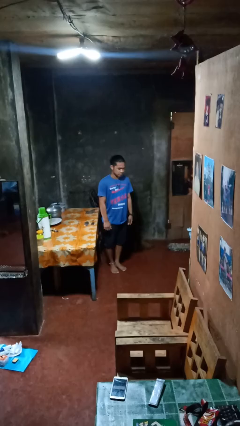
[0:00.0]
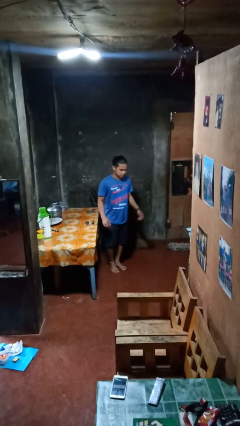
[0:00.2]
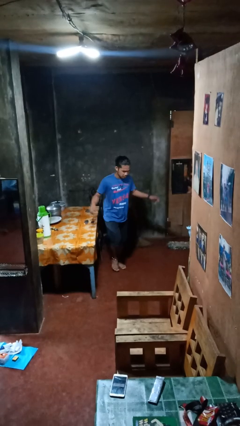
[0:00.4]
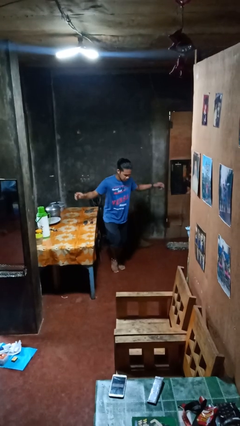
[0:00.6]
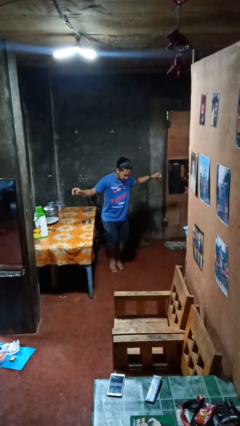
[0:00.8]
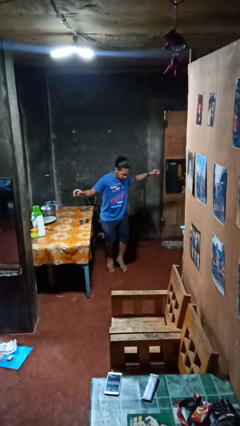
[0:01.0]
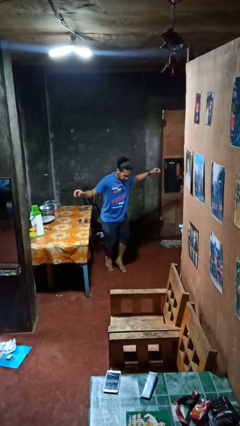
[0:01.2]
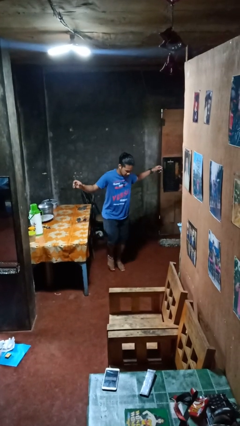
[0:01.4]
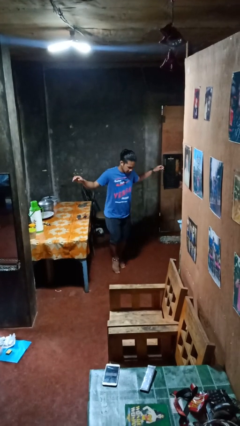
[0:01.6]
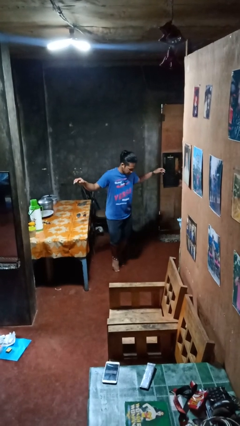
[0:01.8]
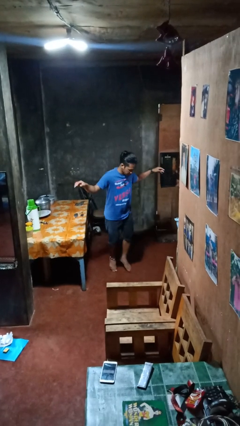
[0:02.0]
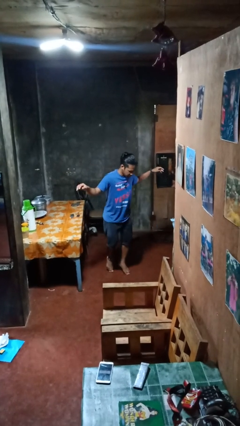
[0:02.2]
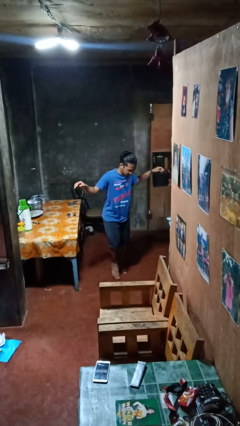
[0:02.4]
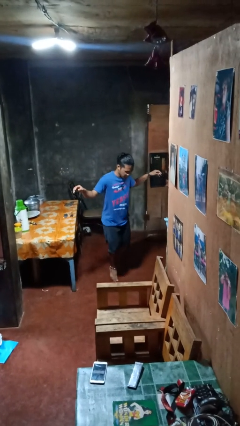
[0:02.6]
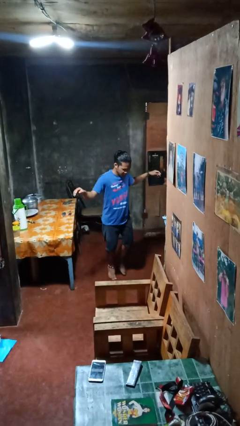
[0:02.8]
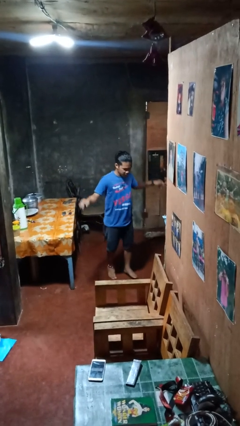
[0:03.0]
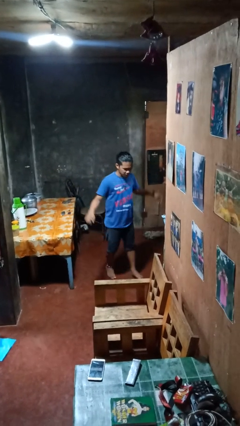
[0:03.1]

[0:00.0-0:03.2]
person walks tiptoe

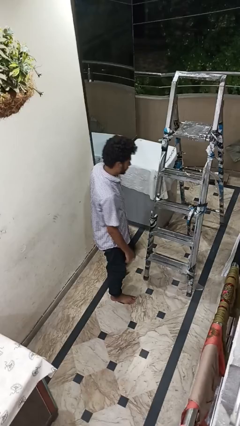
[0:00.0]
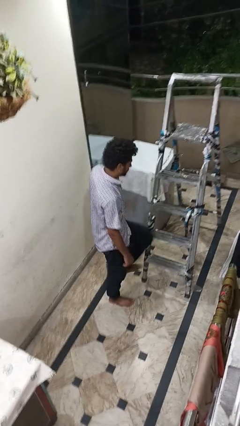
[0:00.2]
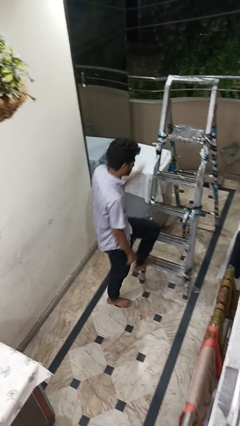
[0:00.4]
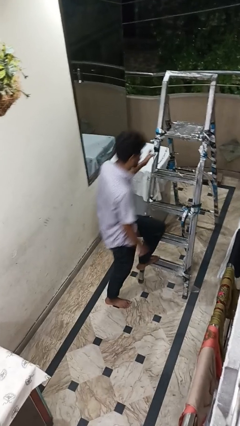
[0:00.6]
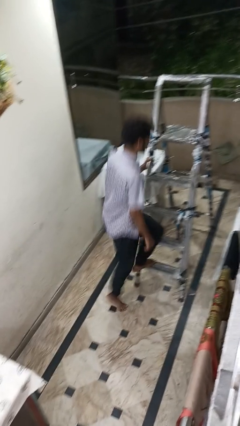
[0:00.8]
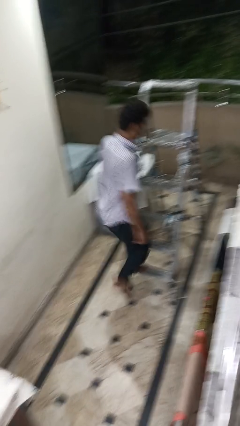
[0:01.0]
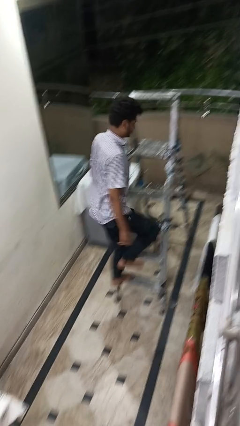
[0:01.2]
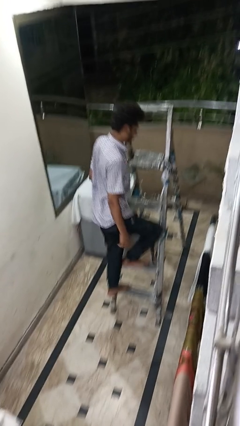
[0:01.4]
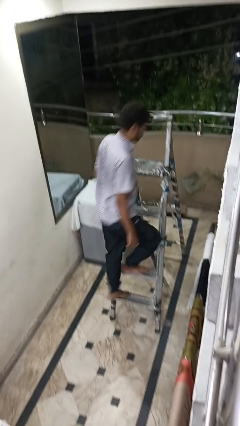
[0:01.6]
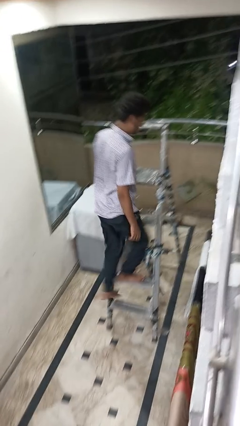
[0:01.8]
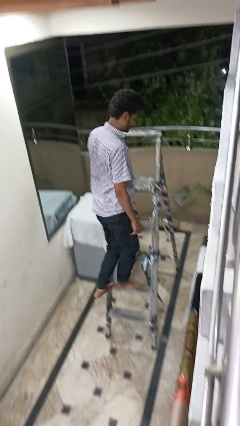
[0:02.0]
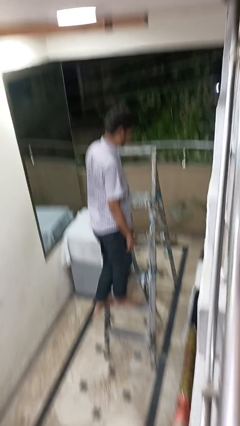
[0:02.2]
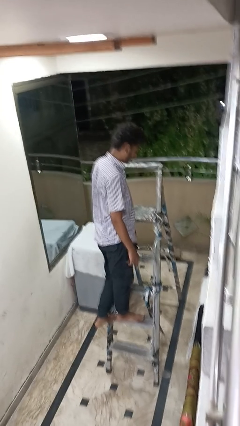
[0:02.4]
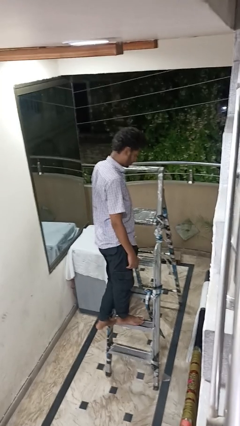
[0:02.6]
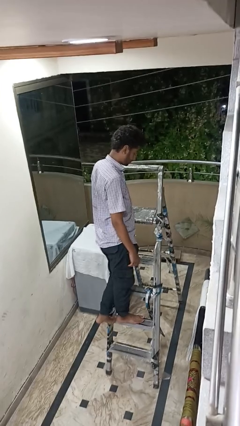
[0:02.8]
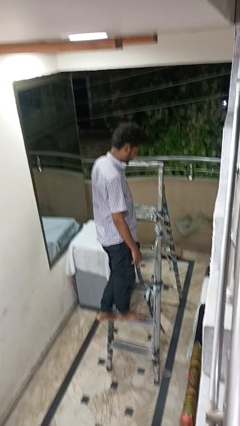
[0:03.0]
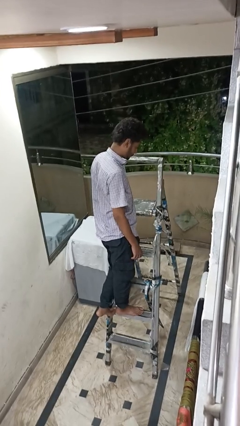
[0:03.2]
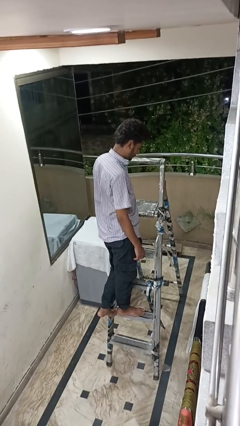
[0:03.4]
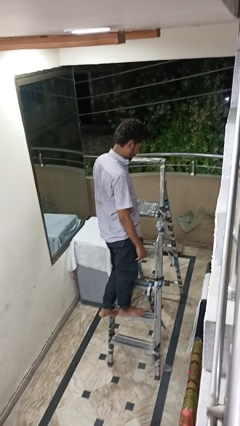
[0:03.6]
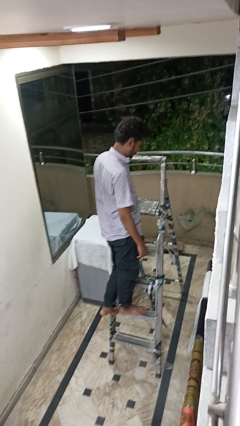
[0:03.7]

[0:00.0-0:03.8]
person climbs up ladder

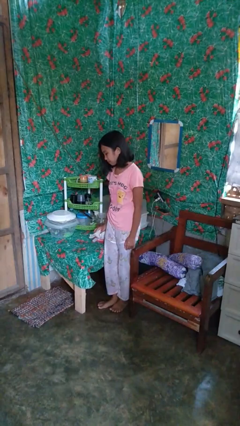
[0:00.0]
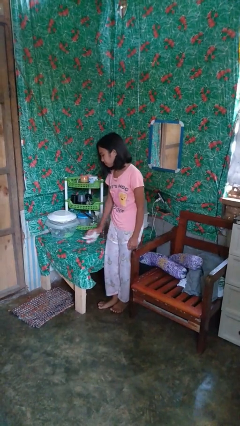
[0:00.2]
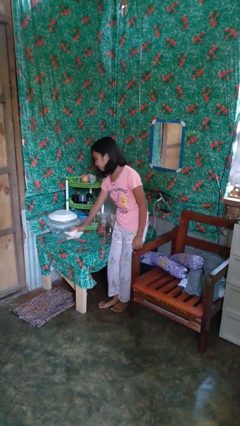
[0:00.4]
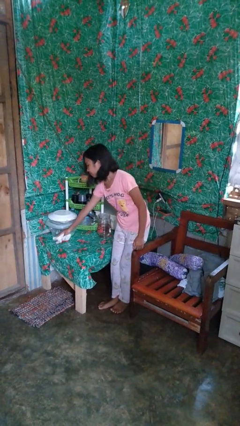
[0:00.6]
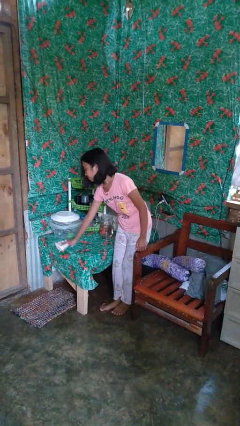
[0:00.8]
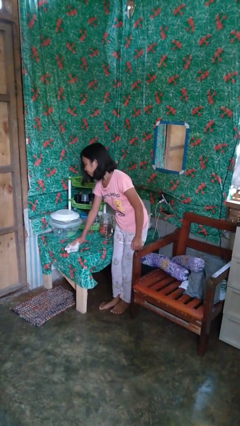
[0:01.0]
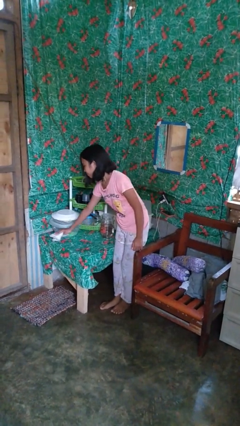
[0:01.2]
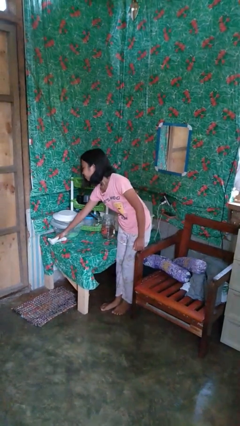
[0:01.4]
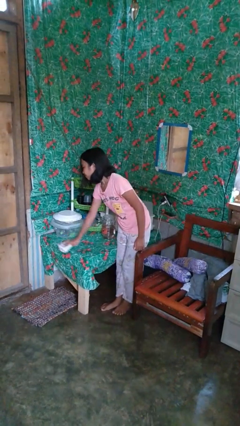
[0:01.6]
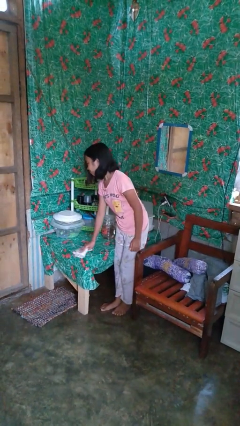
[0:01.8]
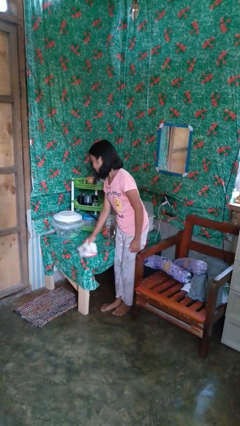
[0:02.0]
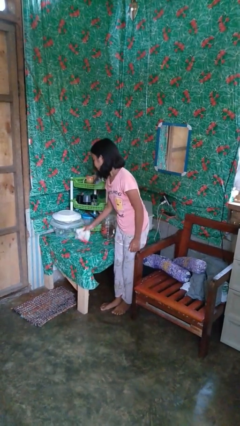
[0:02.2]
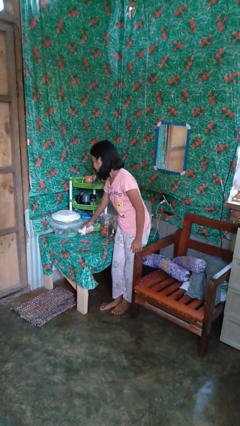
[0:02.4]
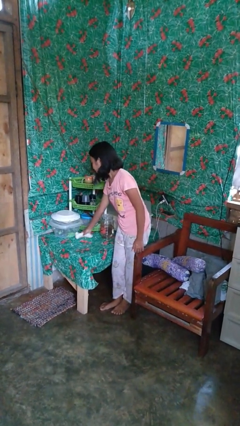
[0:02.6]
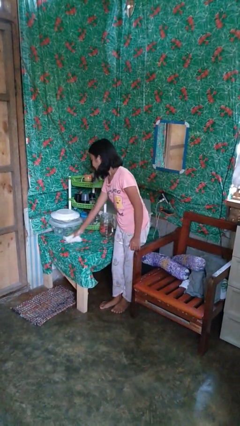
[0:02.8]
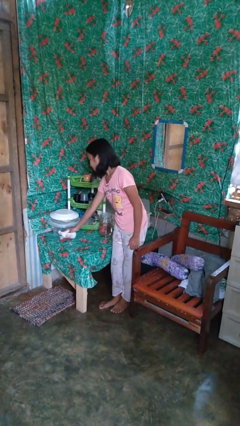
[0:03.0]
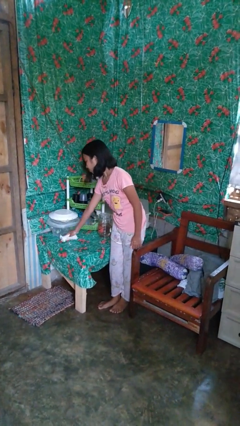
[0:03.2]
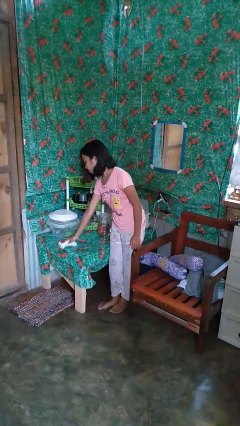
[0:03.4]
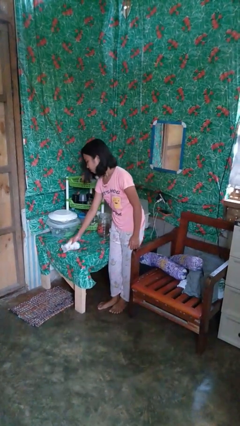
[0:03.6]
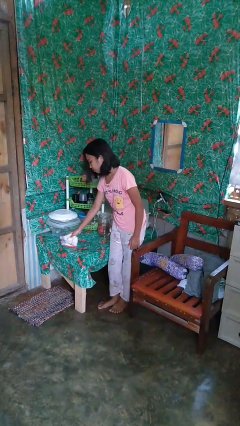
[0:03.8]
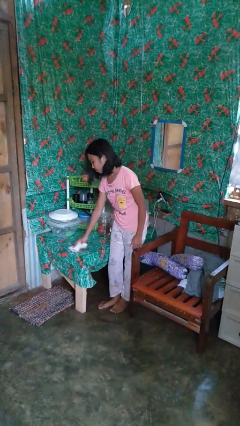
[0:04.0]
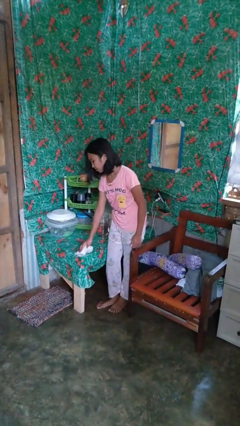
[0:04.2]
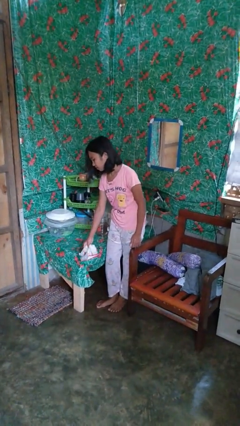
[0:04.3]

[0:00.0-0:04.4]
person cleans table with rag

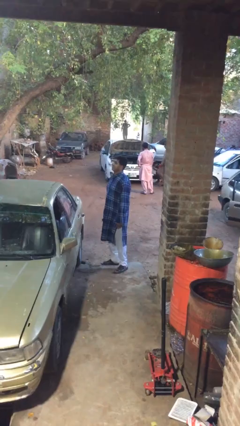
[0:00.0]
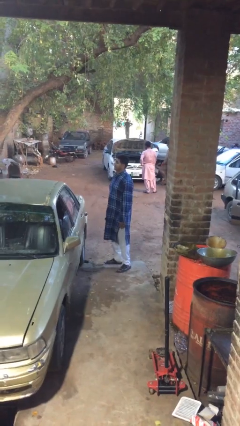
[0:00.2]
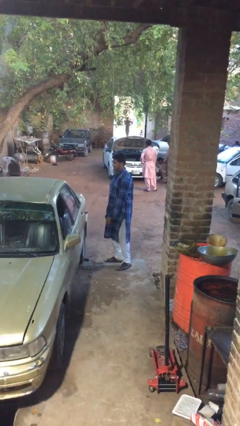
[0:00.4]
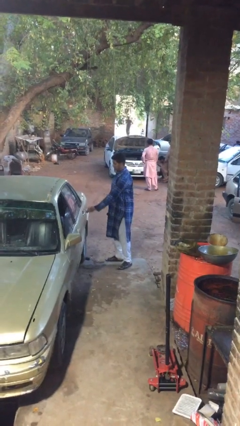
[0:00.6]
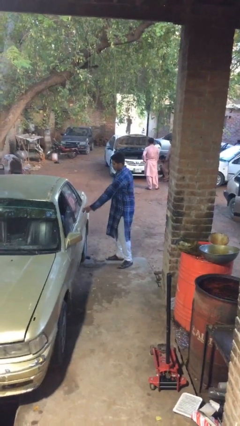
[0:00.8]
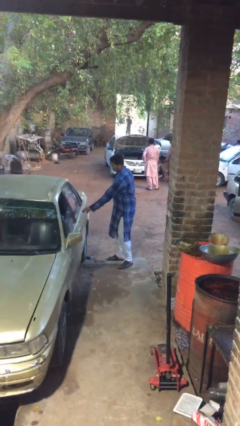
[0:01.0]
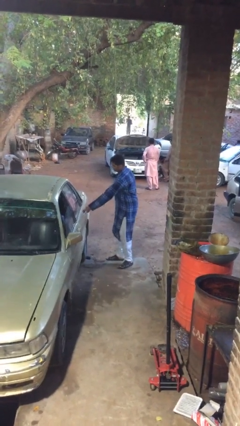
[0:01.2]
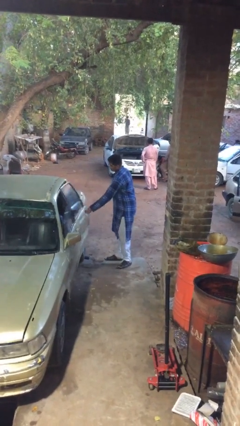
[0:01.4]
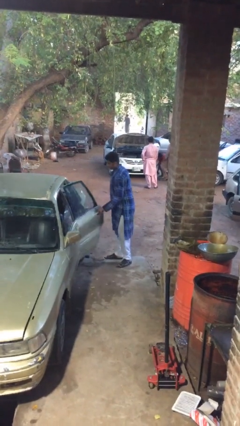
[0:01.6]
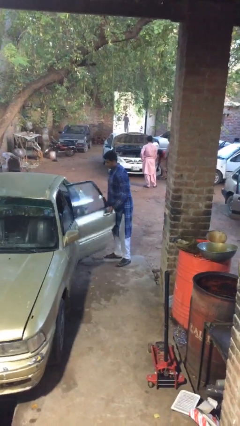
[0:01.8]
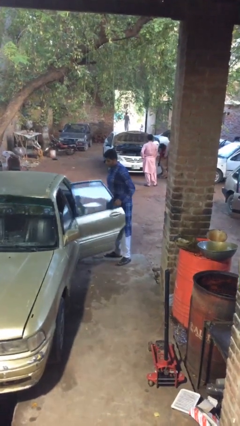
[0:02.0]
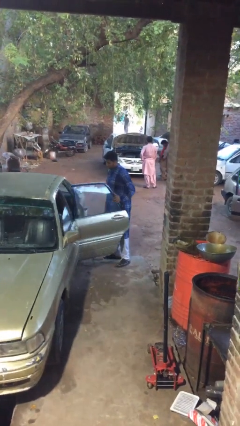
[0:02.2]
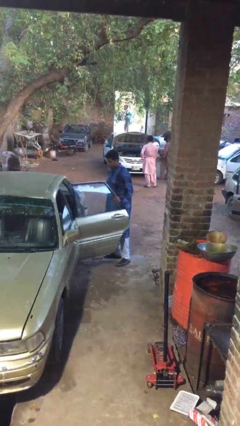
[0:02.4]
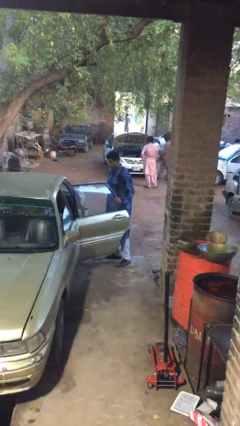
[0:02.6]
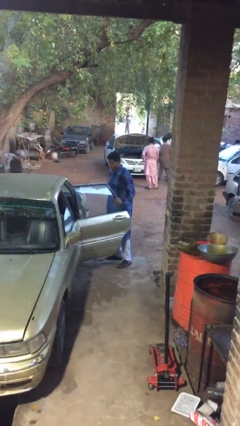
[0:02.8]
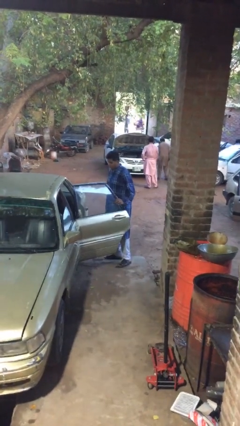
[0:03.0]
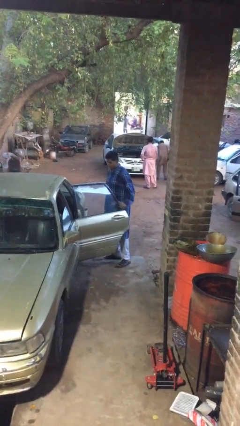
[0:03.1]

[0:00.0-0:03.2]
person opens car door

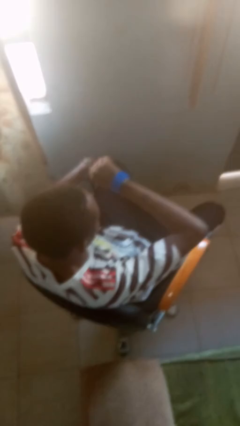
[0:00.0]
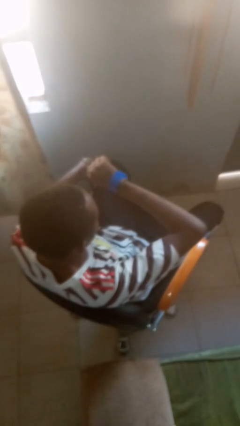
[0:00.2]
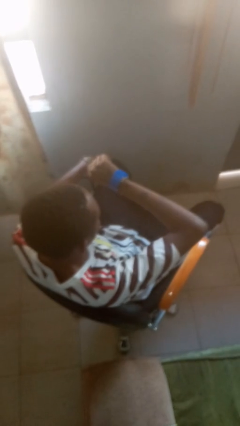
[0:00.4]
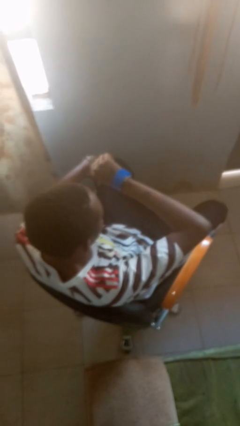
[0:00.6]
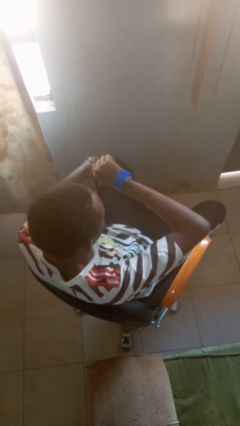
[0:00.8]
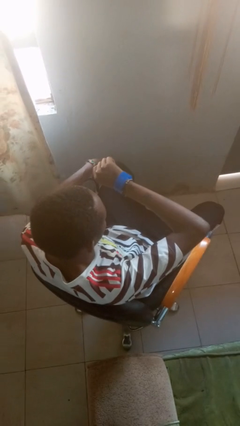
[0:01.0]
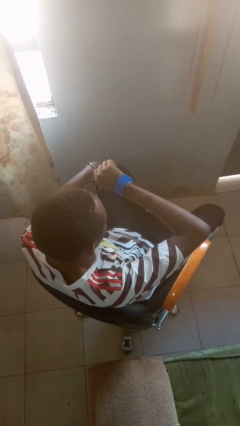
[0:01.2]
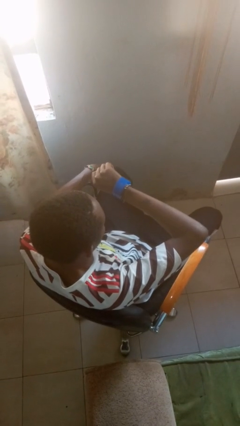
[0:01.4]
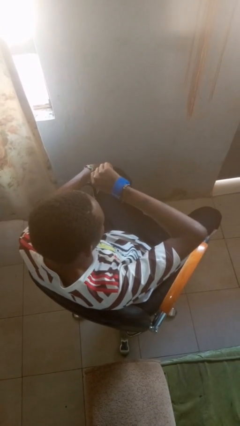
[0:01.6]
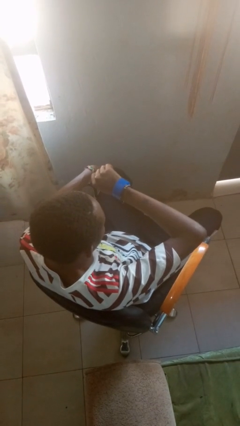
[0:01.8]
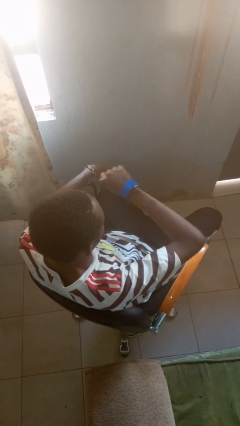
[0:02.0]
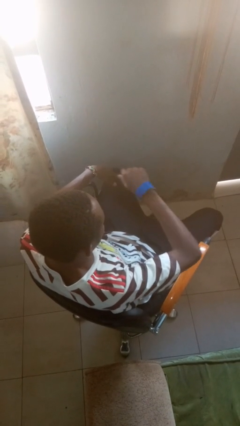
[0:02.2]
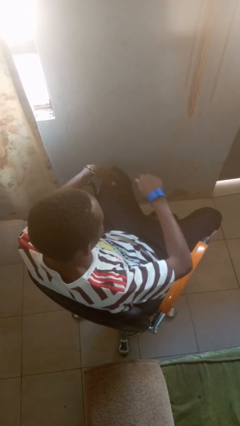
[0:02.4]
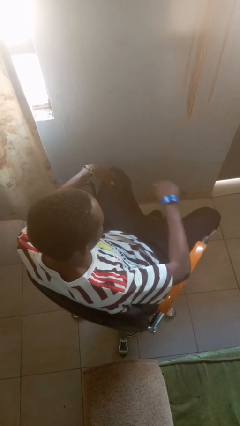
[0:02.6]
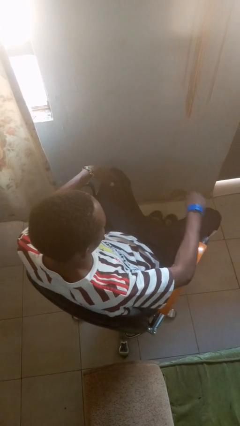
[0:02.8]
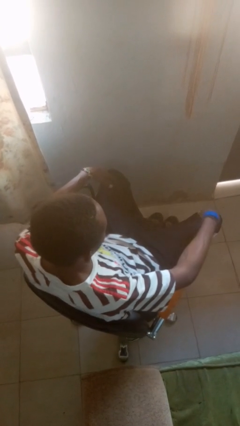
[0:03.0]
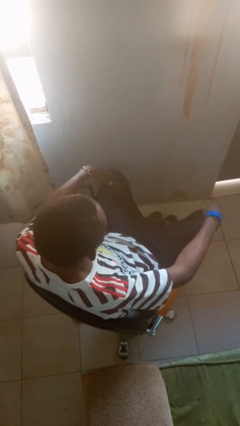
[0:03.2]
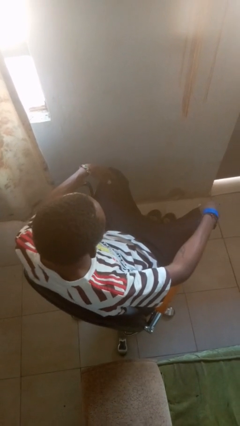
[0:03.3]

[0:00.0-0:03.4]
person looks at wristwatch
